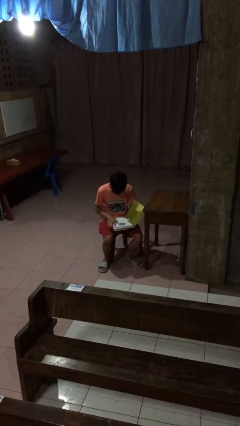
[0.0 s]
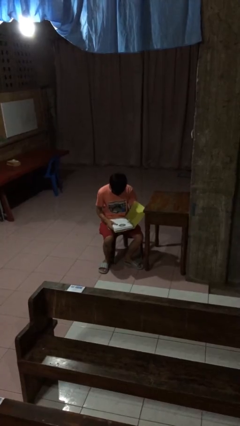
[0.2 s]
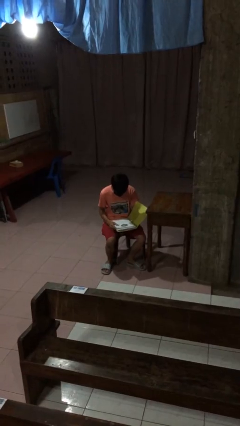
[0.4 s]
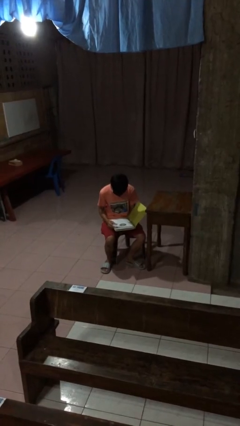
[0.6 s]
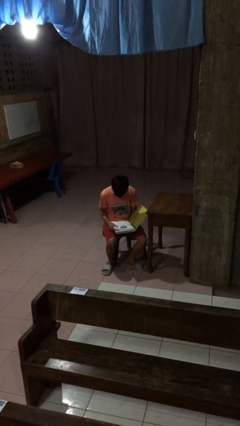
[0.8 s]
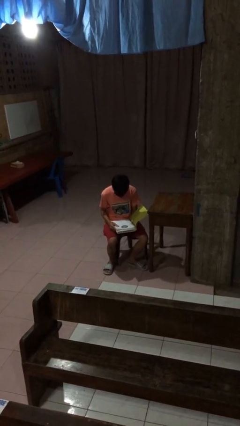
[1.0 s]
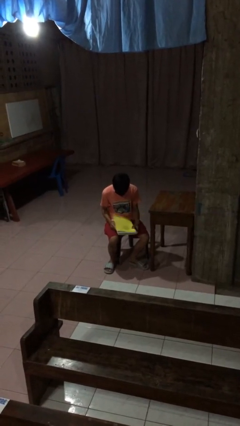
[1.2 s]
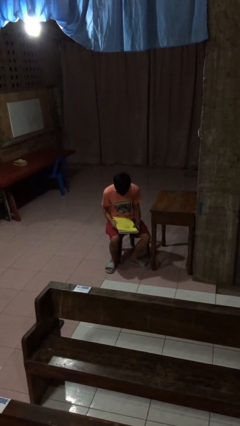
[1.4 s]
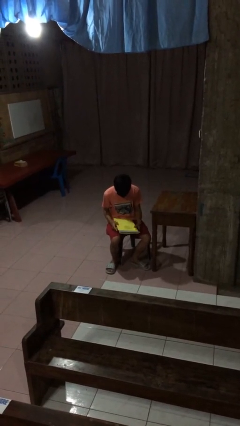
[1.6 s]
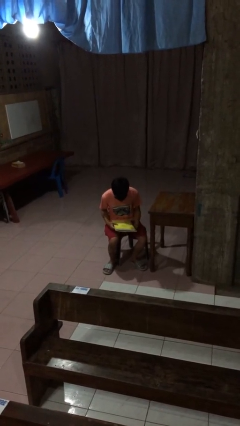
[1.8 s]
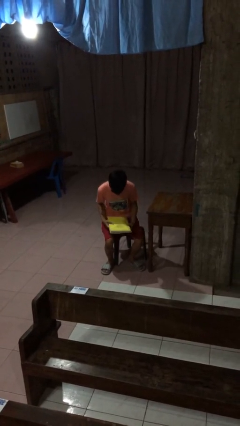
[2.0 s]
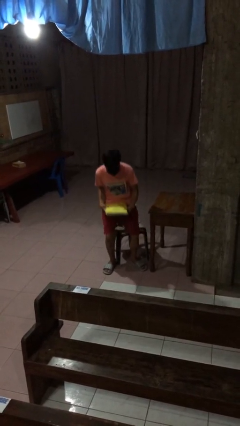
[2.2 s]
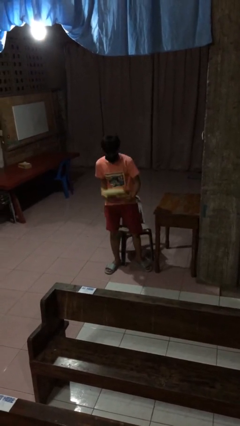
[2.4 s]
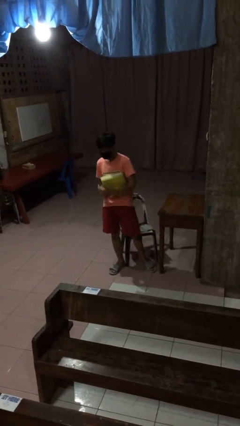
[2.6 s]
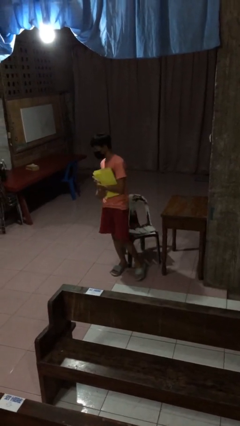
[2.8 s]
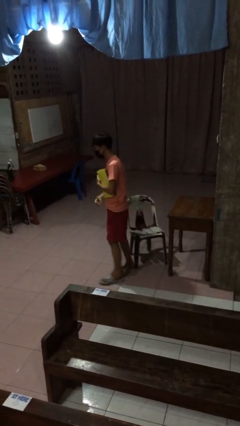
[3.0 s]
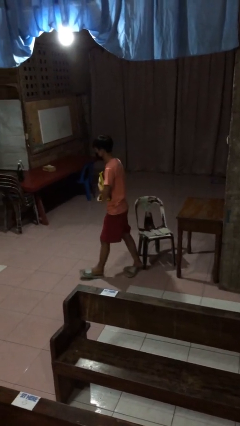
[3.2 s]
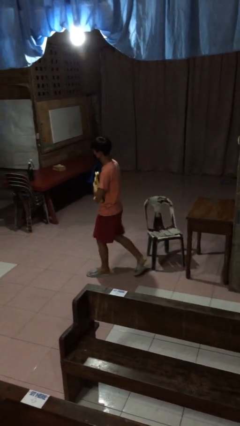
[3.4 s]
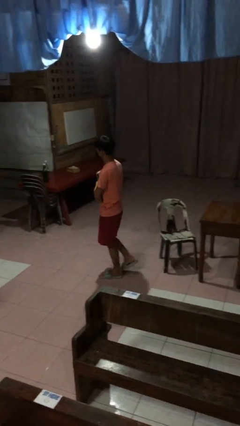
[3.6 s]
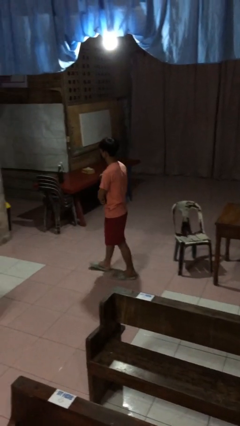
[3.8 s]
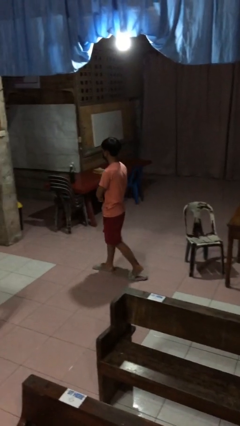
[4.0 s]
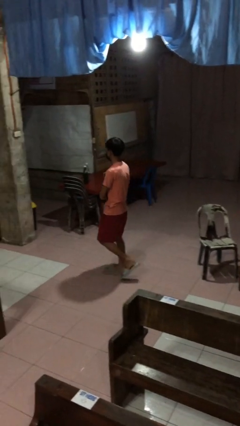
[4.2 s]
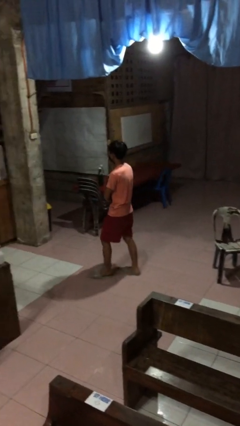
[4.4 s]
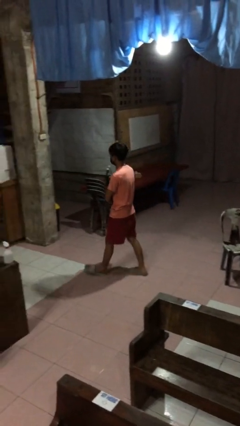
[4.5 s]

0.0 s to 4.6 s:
person stands up

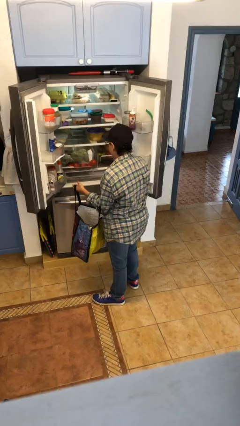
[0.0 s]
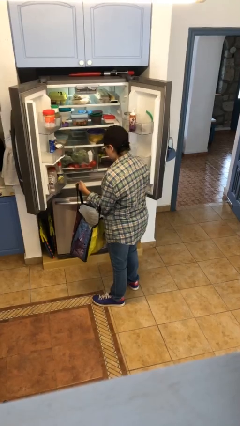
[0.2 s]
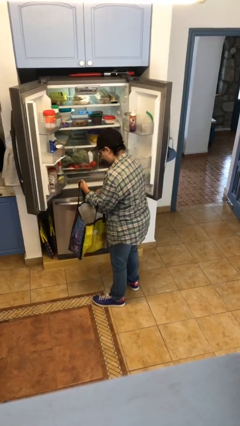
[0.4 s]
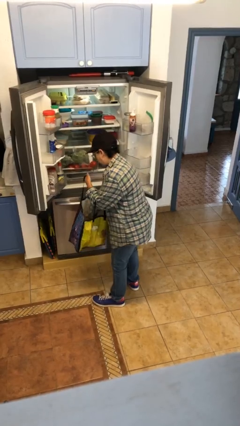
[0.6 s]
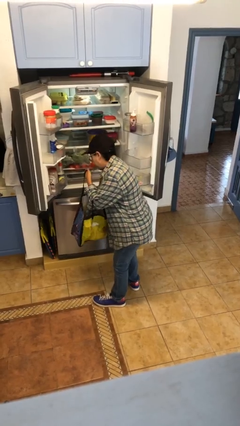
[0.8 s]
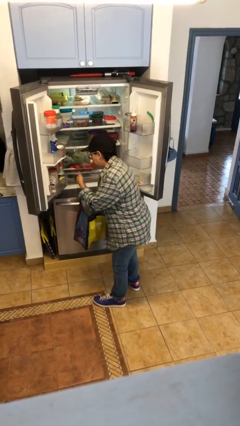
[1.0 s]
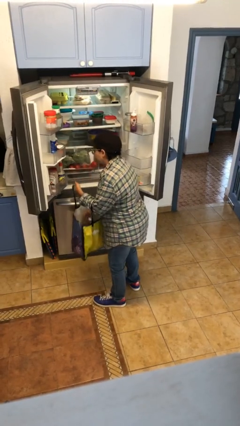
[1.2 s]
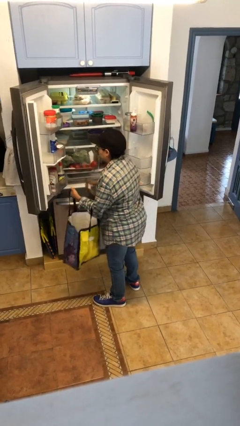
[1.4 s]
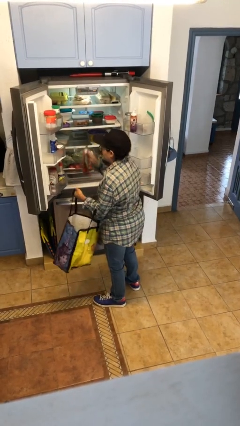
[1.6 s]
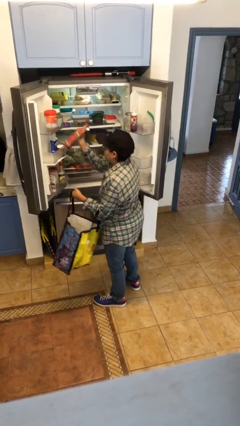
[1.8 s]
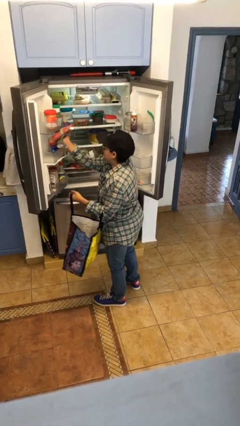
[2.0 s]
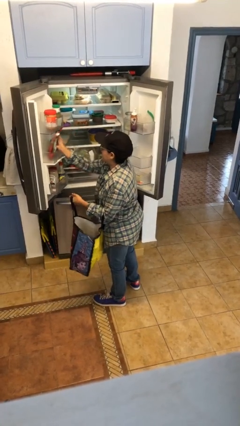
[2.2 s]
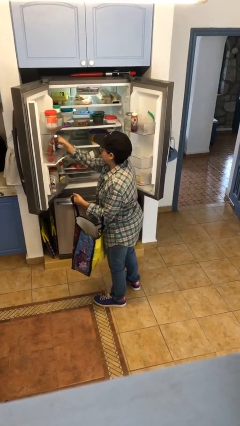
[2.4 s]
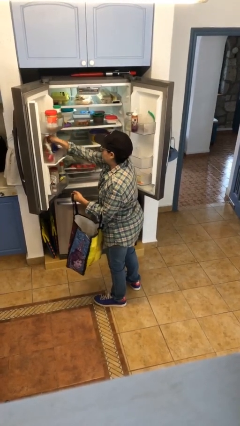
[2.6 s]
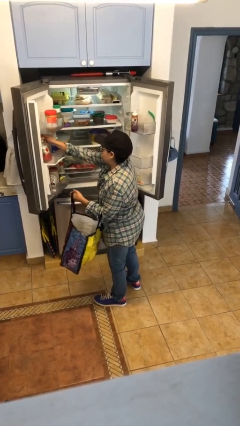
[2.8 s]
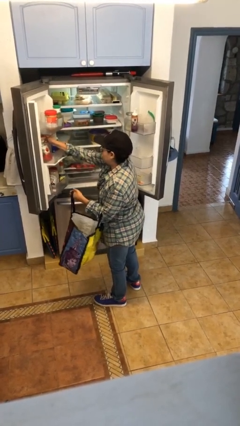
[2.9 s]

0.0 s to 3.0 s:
person loads groceries into refrigerator

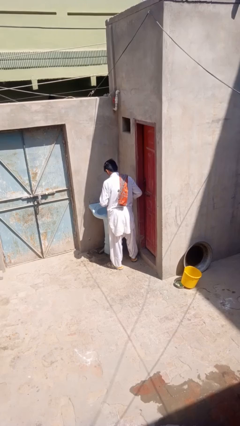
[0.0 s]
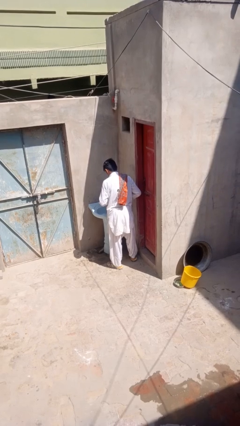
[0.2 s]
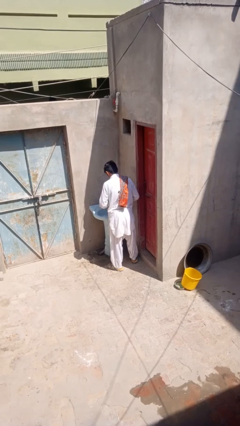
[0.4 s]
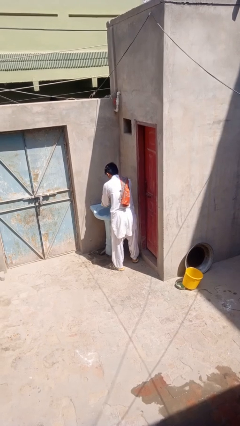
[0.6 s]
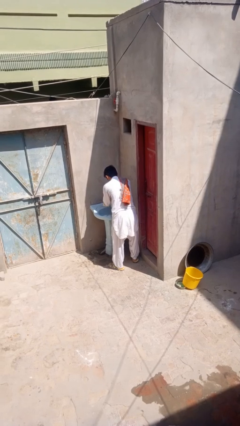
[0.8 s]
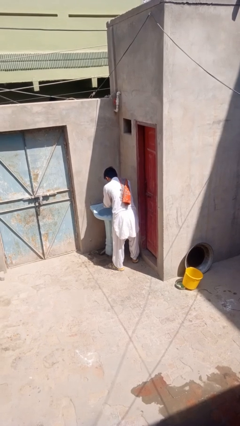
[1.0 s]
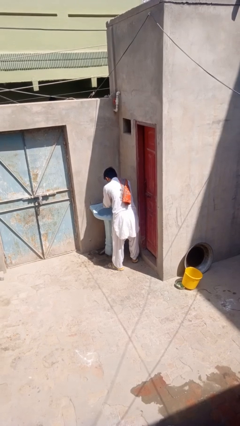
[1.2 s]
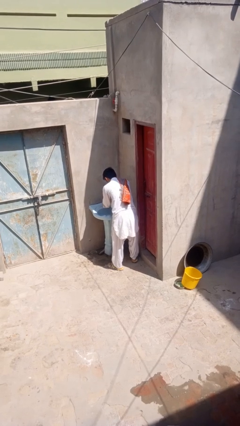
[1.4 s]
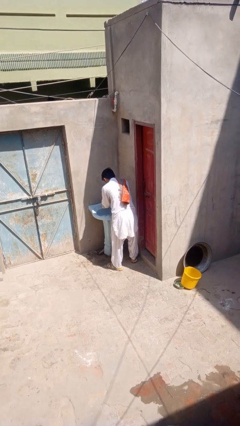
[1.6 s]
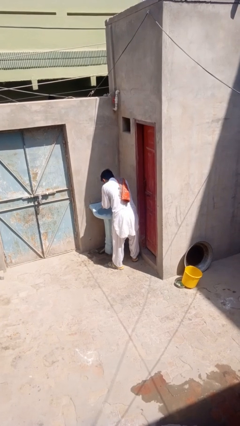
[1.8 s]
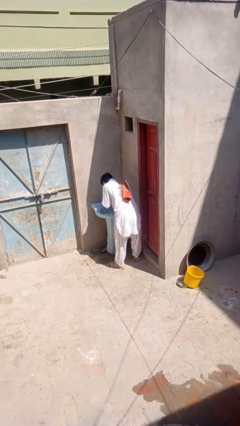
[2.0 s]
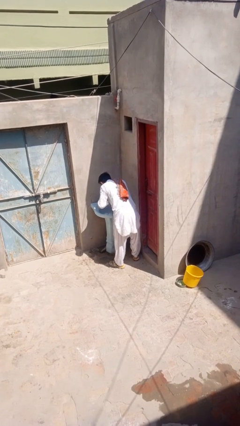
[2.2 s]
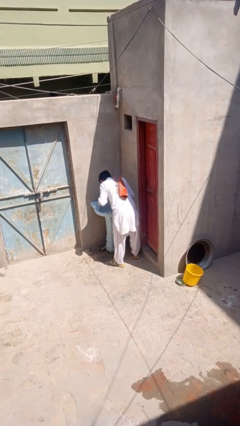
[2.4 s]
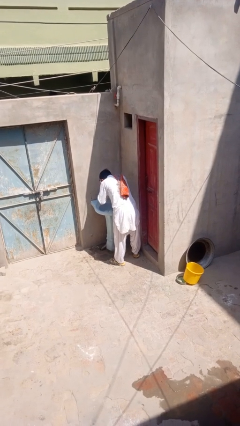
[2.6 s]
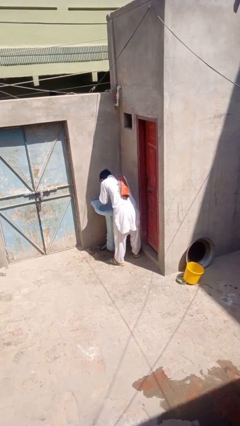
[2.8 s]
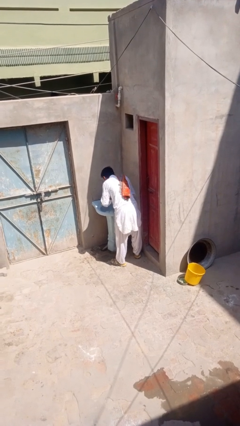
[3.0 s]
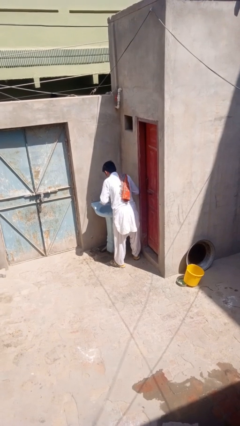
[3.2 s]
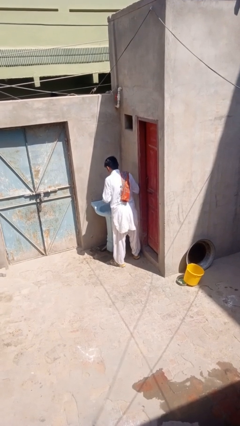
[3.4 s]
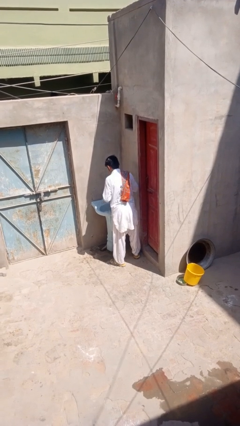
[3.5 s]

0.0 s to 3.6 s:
person washes face

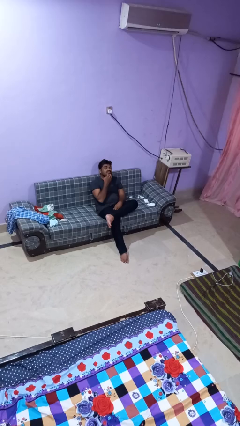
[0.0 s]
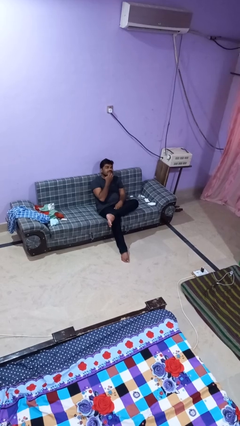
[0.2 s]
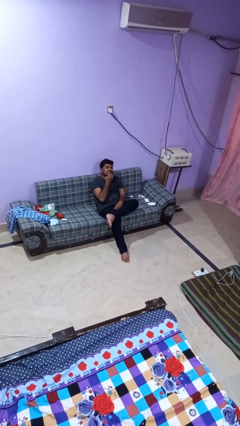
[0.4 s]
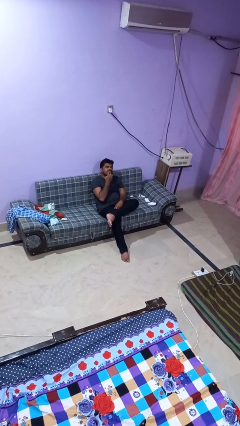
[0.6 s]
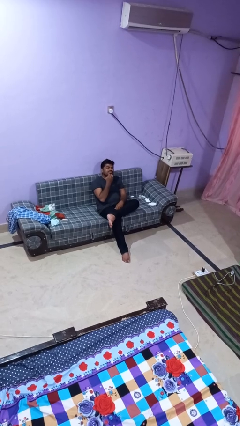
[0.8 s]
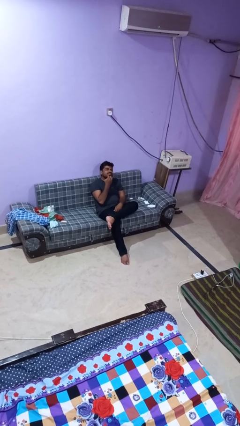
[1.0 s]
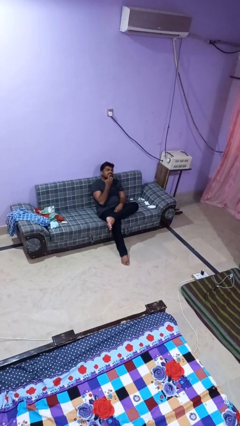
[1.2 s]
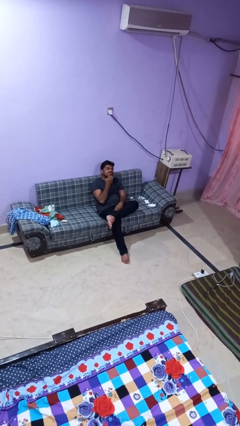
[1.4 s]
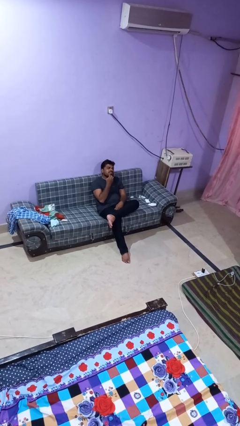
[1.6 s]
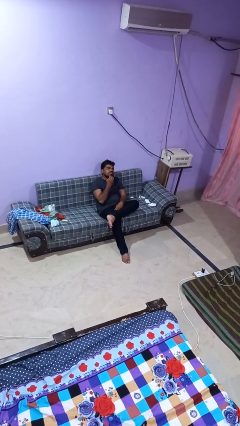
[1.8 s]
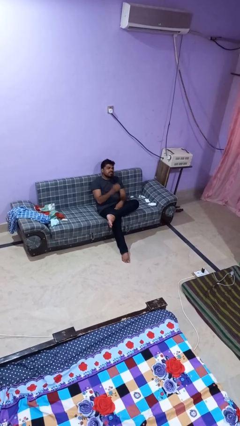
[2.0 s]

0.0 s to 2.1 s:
person strokes chin

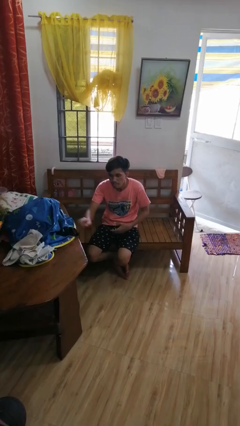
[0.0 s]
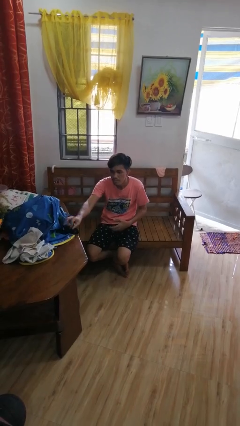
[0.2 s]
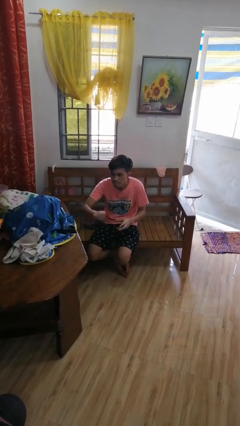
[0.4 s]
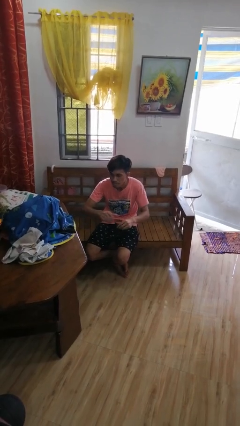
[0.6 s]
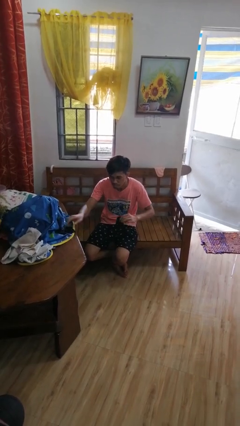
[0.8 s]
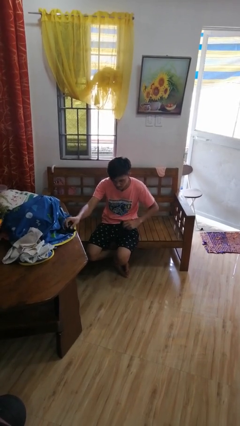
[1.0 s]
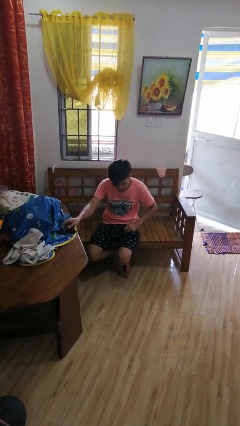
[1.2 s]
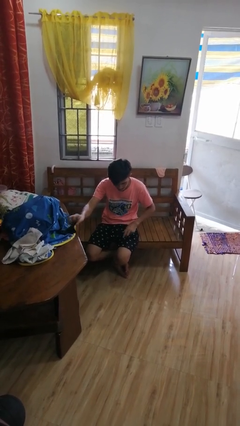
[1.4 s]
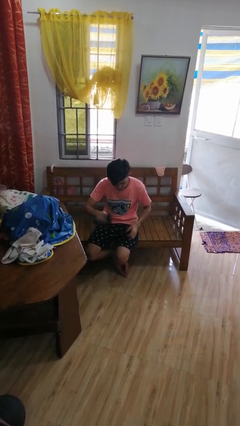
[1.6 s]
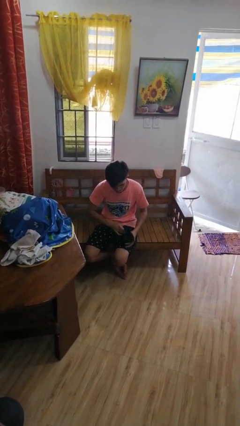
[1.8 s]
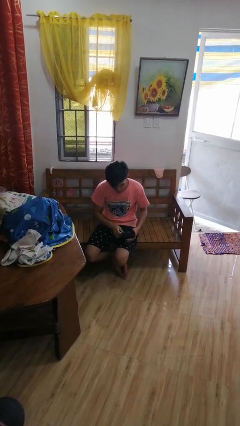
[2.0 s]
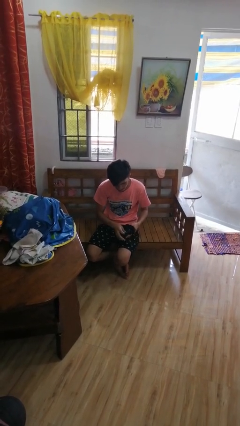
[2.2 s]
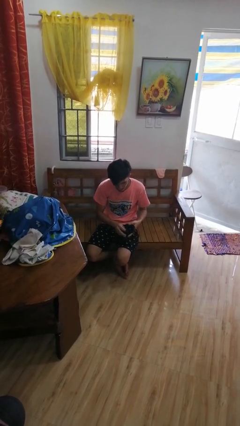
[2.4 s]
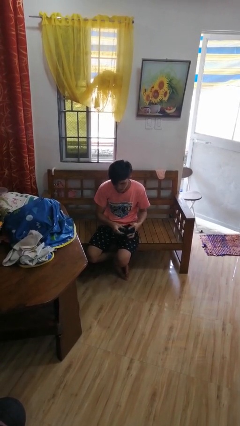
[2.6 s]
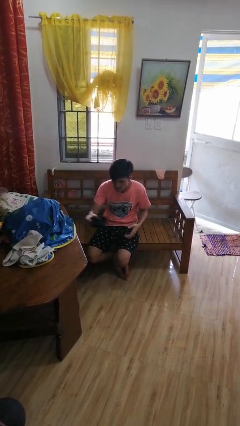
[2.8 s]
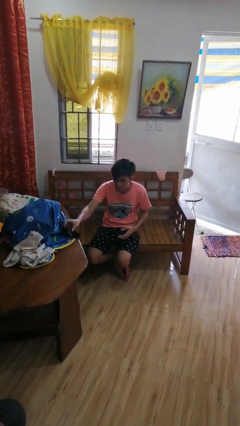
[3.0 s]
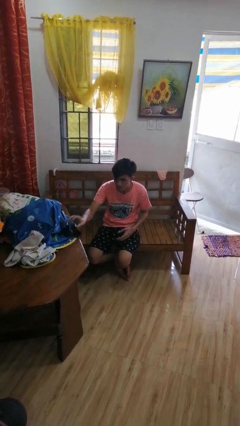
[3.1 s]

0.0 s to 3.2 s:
person folds socks

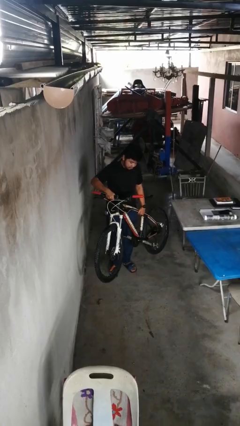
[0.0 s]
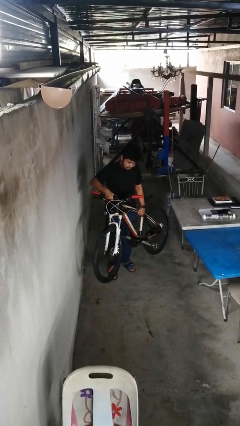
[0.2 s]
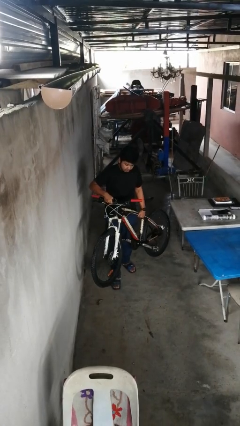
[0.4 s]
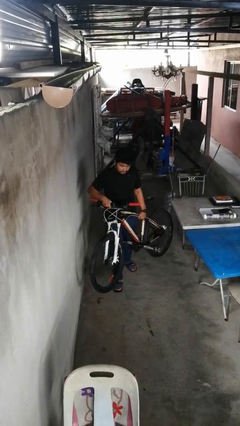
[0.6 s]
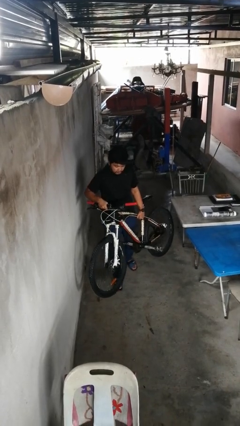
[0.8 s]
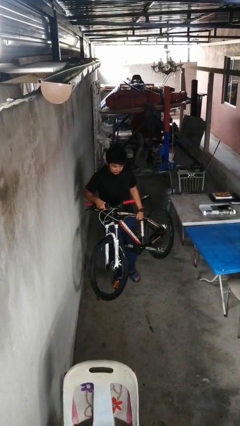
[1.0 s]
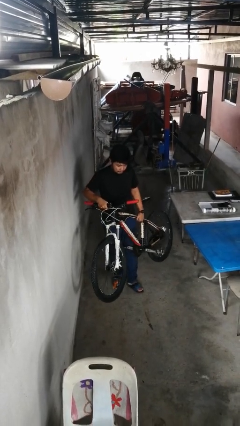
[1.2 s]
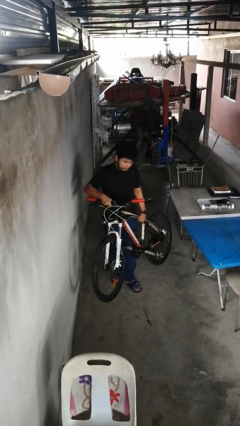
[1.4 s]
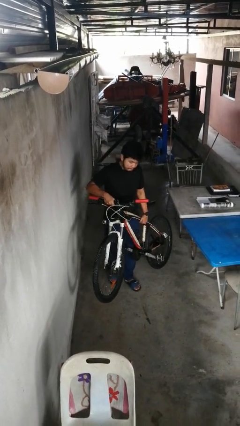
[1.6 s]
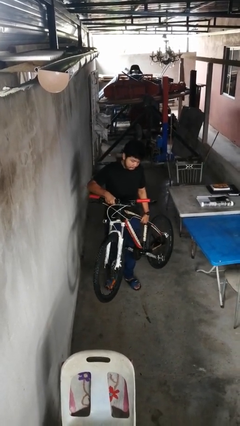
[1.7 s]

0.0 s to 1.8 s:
person carries bicycle
